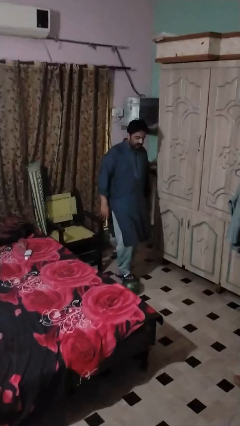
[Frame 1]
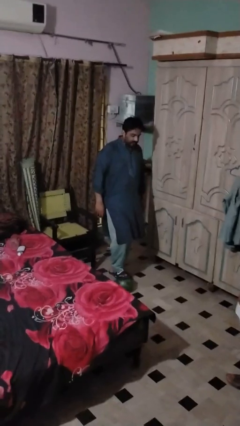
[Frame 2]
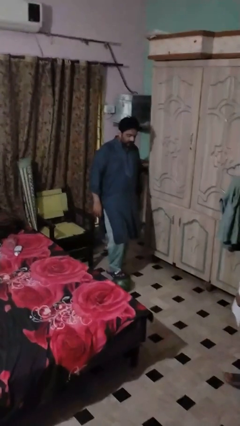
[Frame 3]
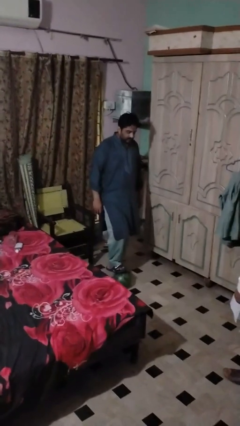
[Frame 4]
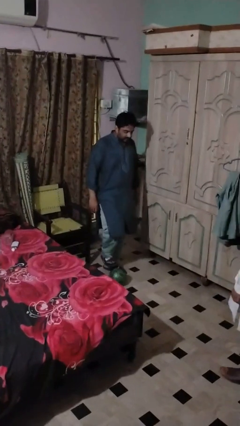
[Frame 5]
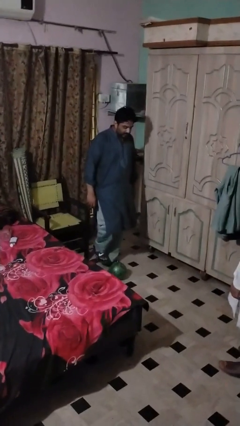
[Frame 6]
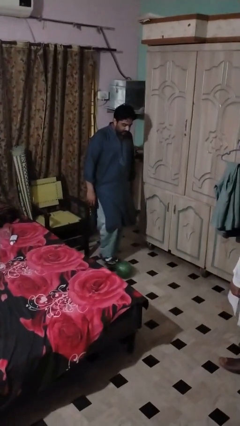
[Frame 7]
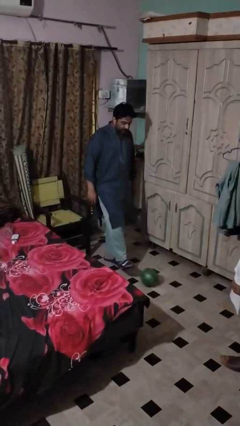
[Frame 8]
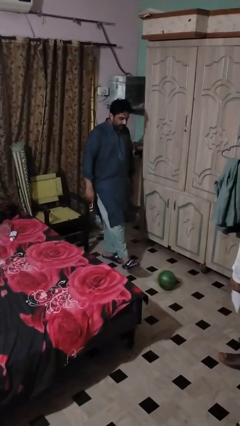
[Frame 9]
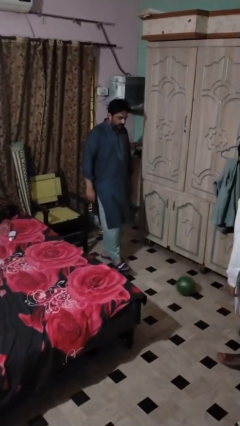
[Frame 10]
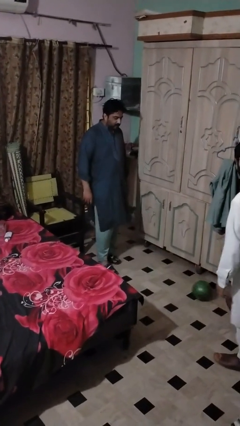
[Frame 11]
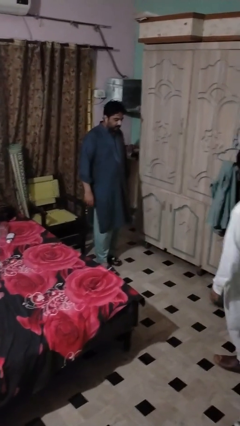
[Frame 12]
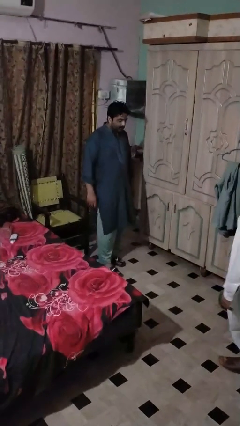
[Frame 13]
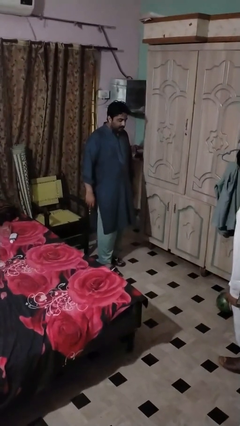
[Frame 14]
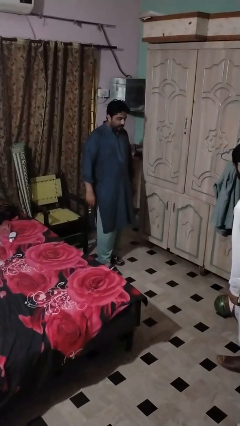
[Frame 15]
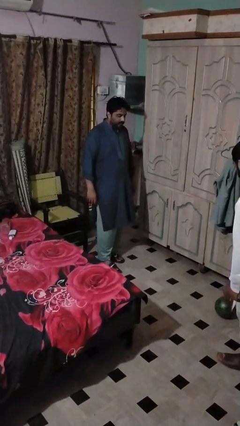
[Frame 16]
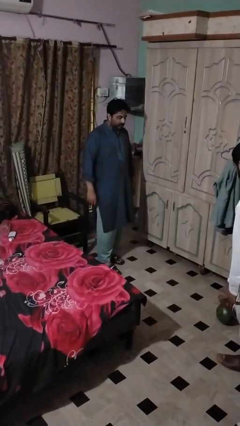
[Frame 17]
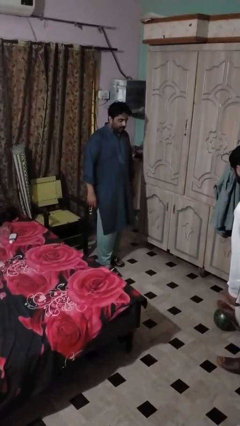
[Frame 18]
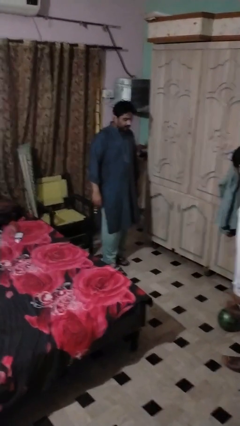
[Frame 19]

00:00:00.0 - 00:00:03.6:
person kicks object to person

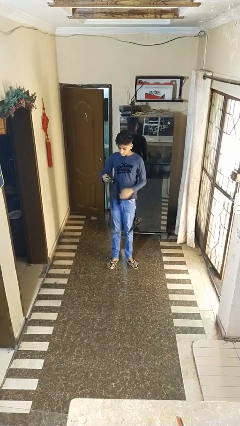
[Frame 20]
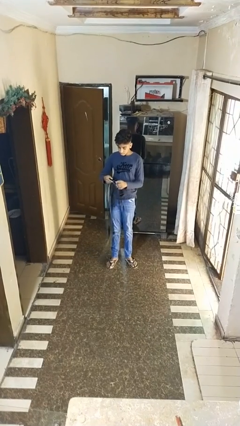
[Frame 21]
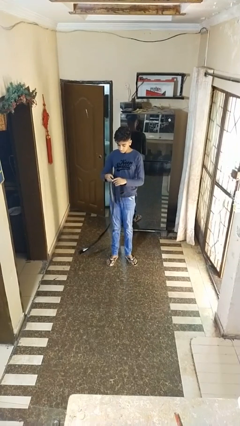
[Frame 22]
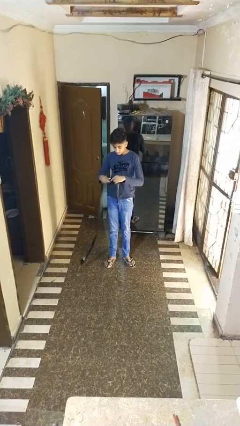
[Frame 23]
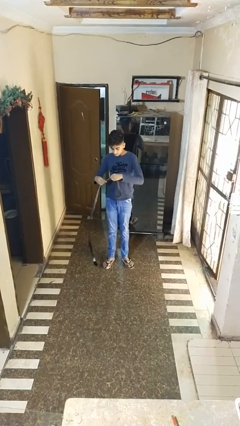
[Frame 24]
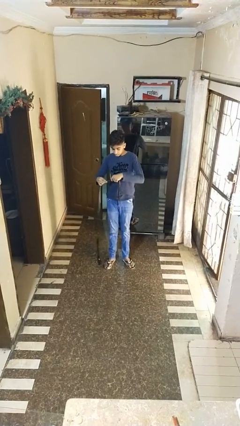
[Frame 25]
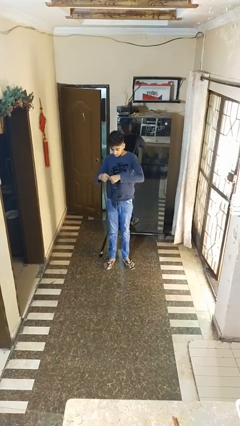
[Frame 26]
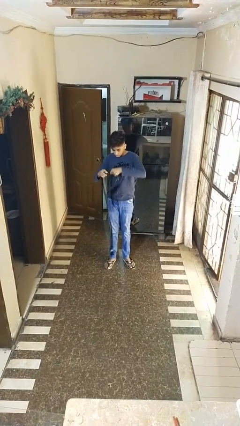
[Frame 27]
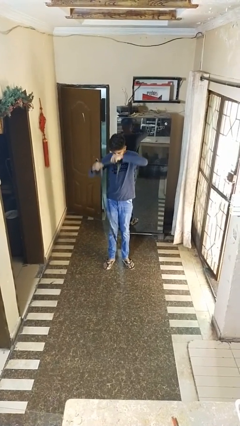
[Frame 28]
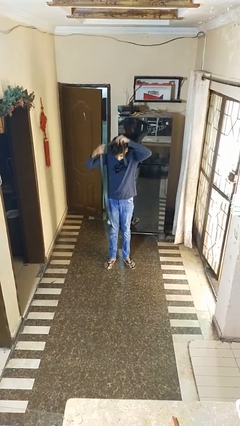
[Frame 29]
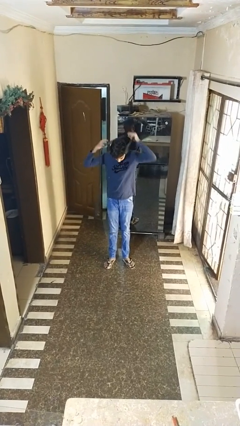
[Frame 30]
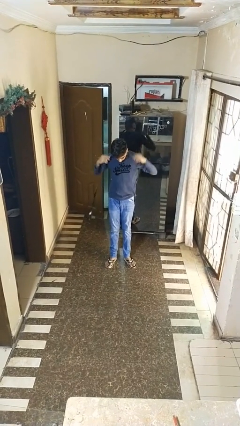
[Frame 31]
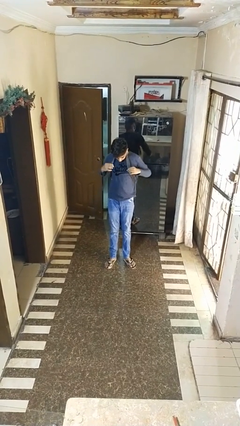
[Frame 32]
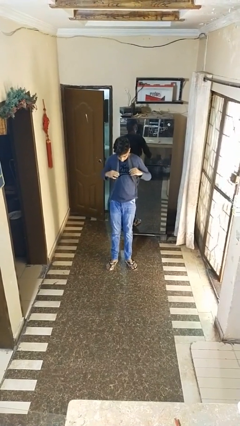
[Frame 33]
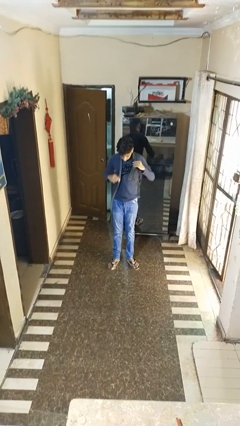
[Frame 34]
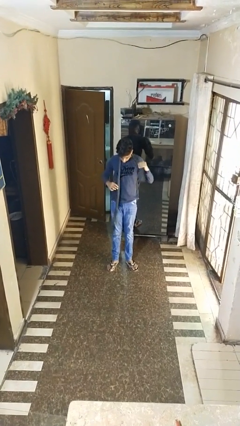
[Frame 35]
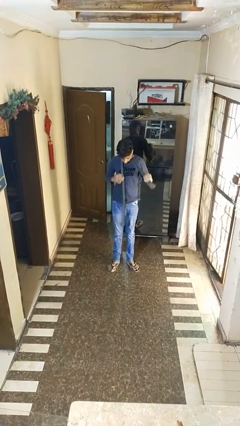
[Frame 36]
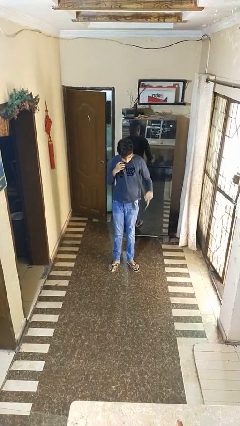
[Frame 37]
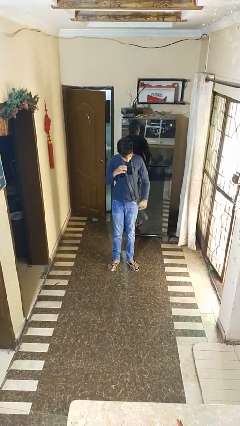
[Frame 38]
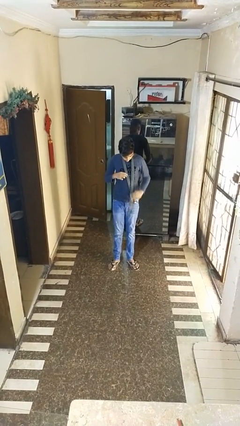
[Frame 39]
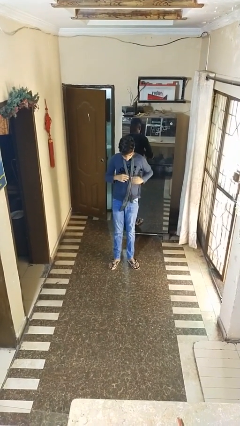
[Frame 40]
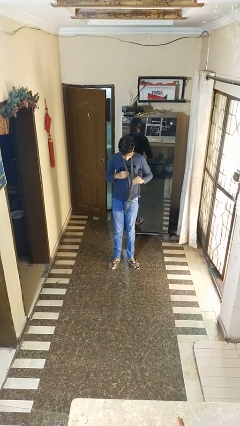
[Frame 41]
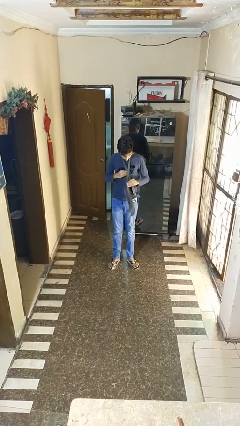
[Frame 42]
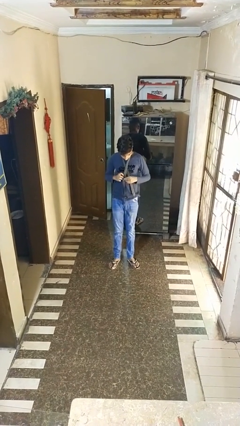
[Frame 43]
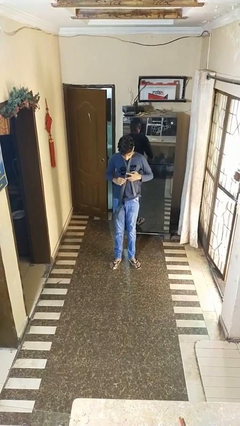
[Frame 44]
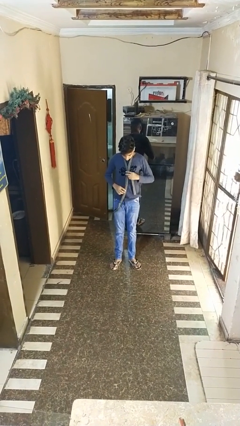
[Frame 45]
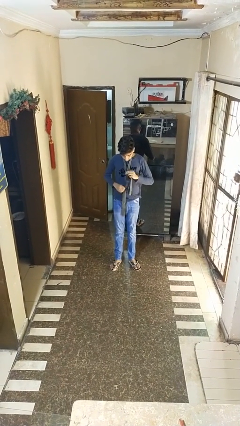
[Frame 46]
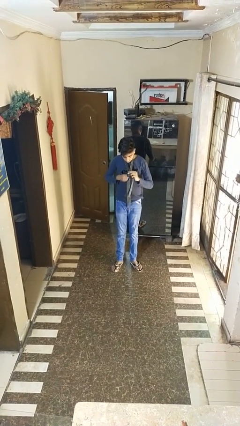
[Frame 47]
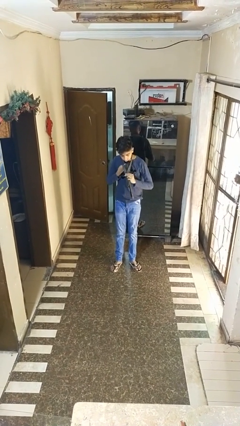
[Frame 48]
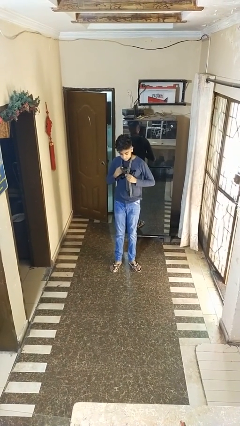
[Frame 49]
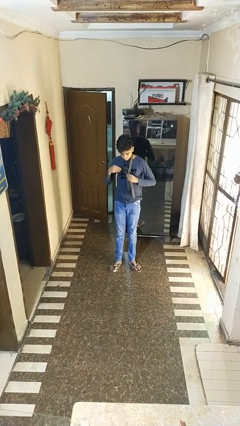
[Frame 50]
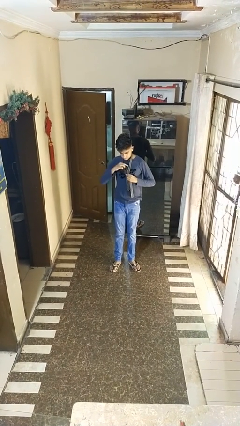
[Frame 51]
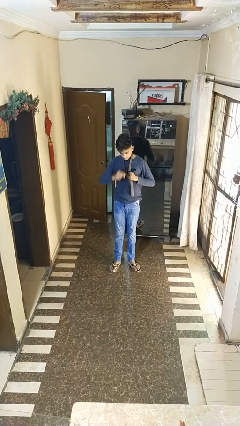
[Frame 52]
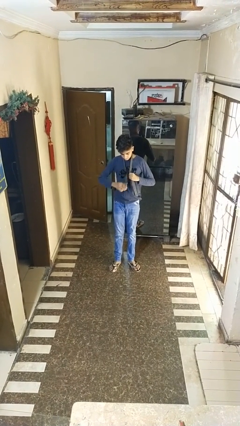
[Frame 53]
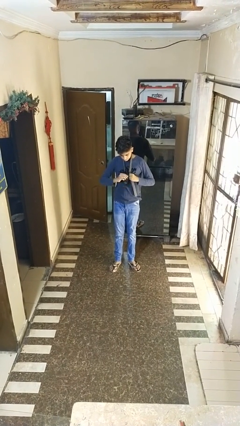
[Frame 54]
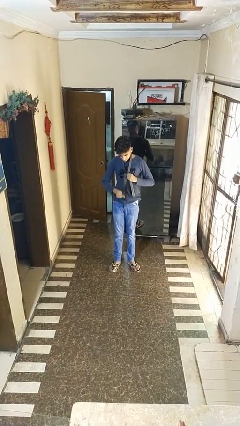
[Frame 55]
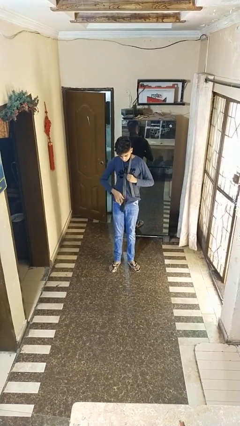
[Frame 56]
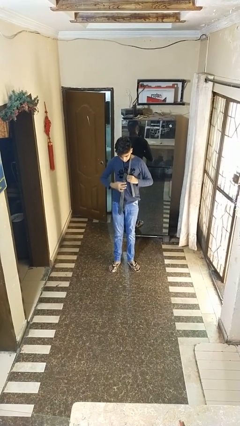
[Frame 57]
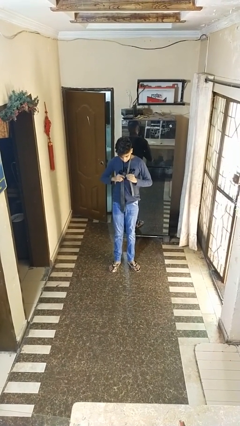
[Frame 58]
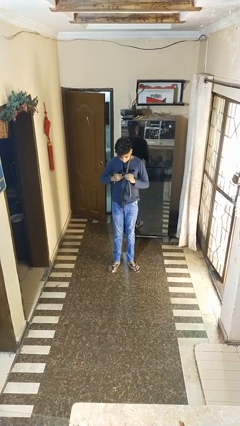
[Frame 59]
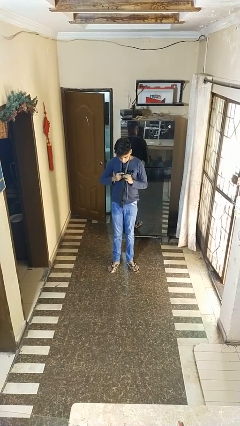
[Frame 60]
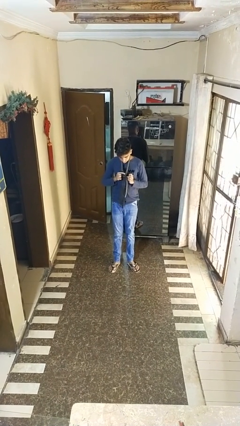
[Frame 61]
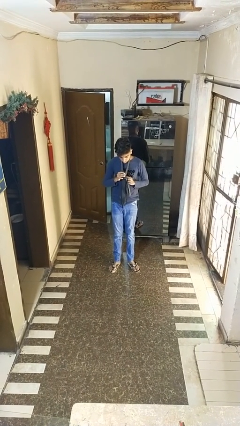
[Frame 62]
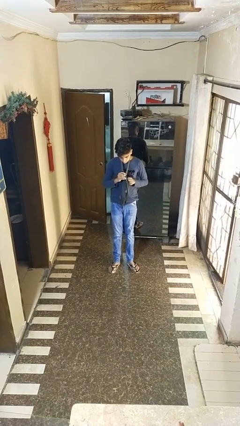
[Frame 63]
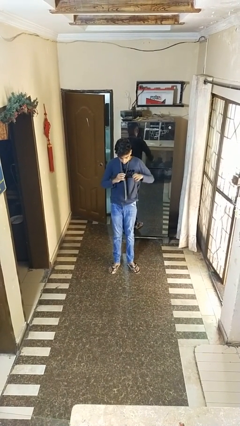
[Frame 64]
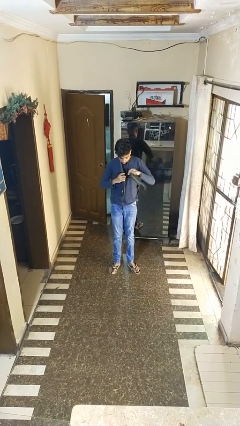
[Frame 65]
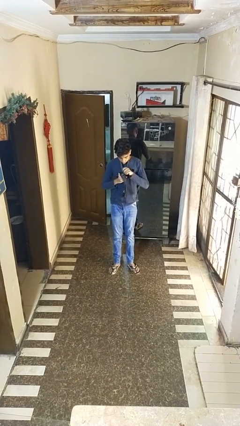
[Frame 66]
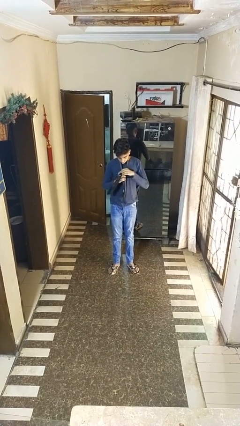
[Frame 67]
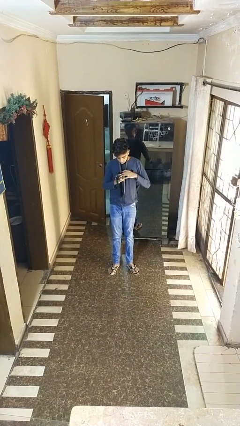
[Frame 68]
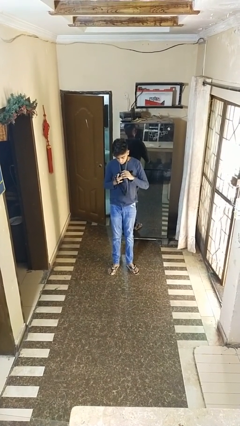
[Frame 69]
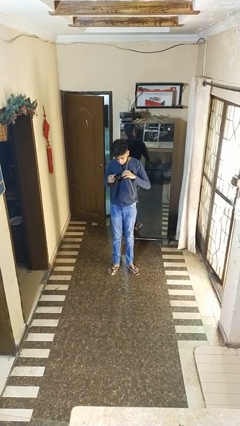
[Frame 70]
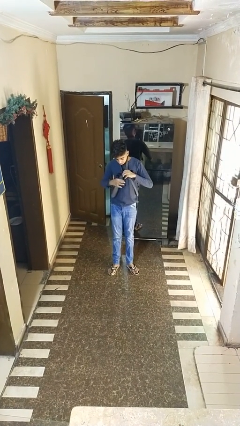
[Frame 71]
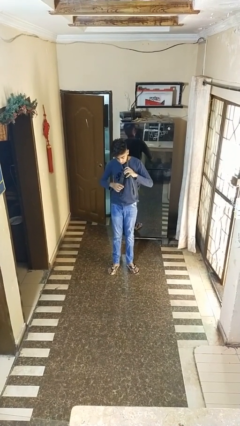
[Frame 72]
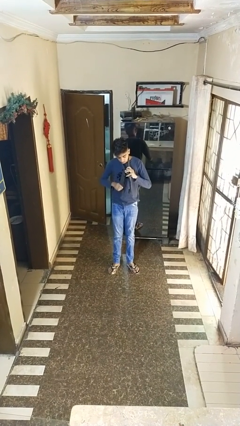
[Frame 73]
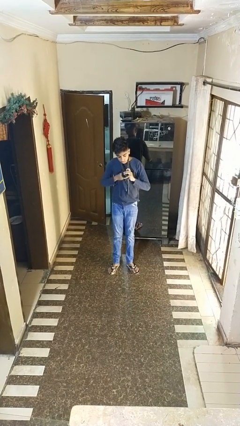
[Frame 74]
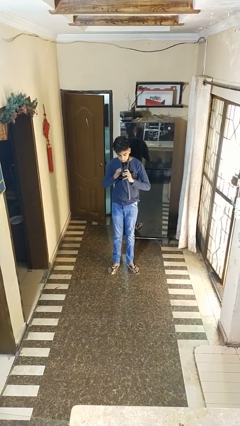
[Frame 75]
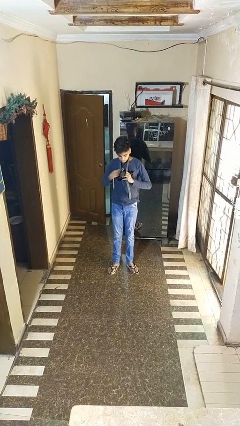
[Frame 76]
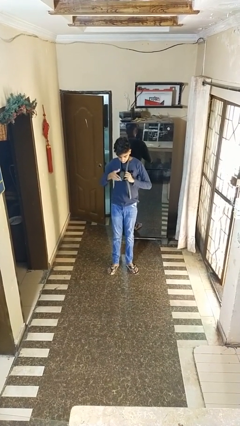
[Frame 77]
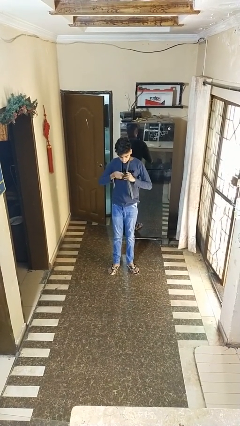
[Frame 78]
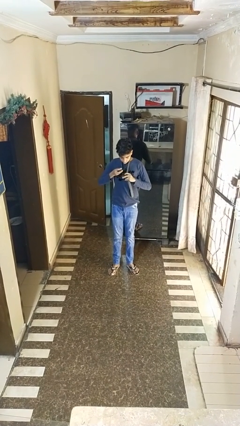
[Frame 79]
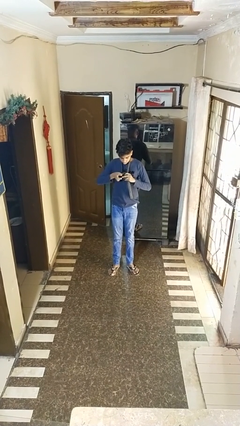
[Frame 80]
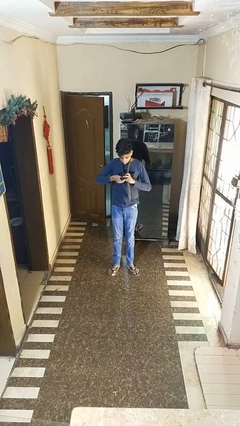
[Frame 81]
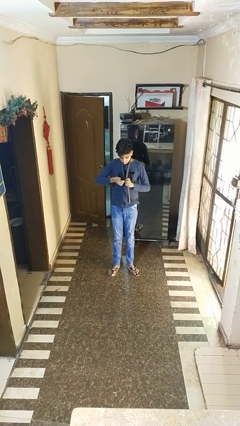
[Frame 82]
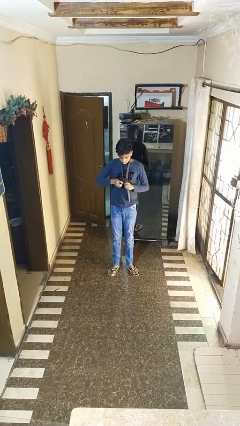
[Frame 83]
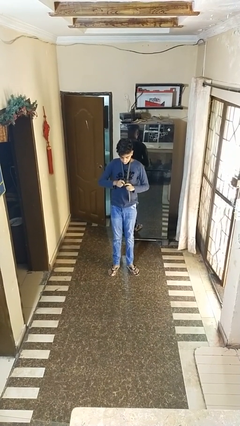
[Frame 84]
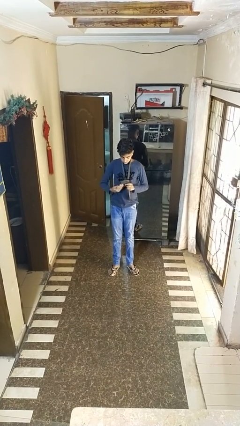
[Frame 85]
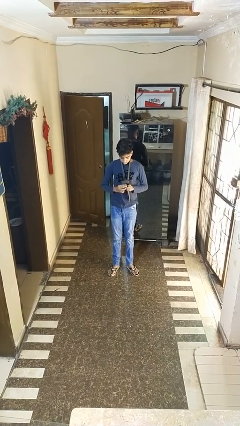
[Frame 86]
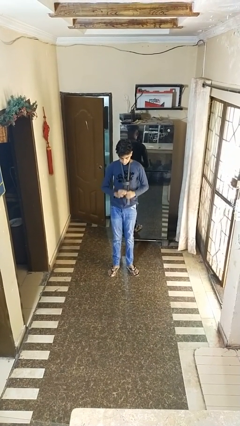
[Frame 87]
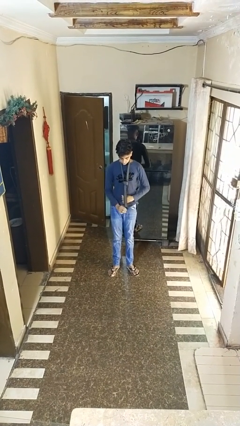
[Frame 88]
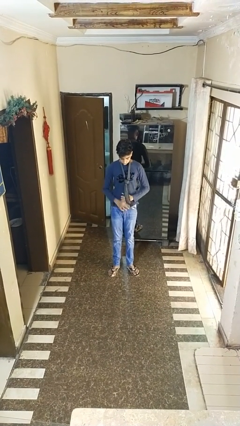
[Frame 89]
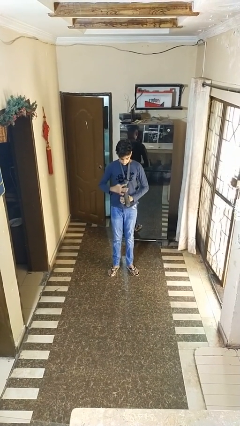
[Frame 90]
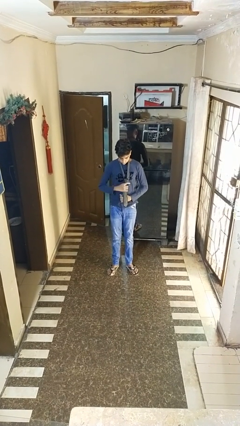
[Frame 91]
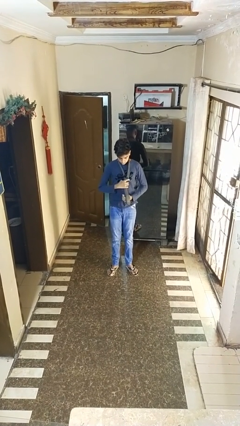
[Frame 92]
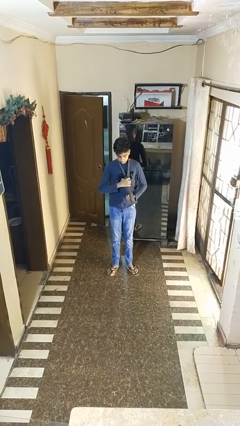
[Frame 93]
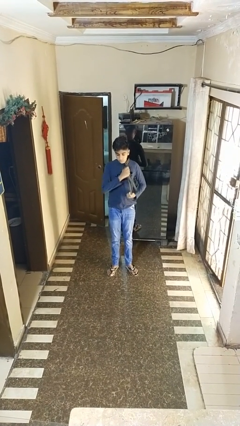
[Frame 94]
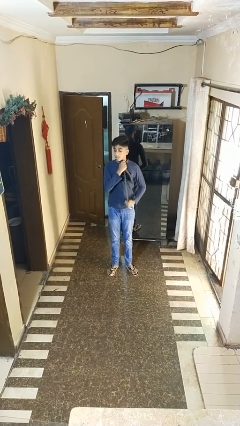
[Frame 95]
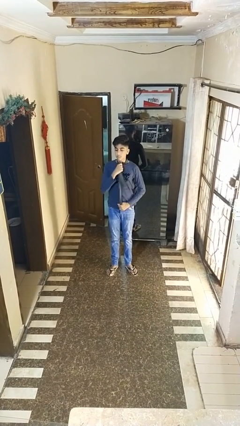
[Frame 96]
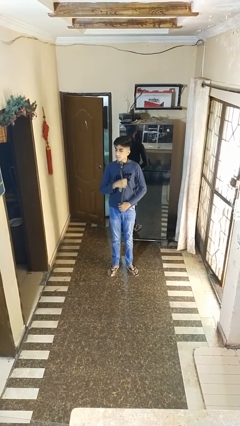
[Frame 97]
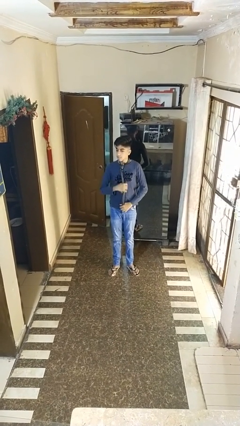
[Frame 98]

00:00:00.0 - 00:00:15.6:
person puts on necktie
